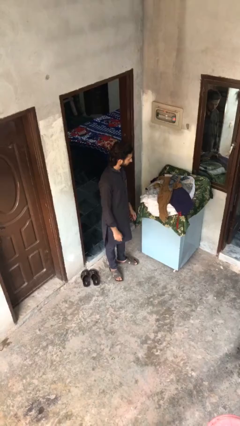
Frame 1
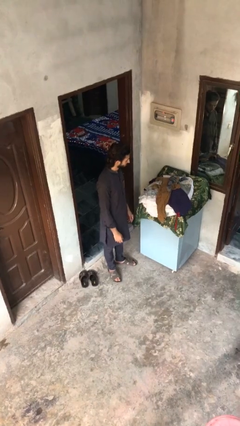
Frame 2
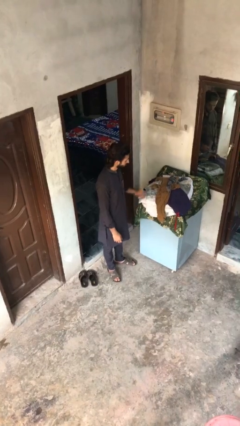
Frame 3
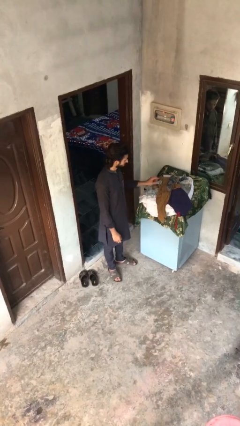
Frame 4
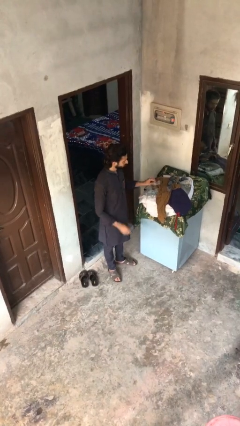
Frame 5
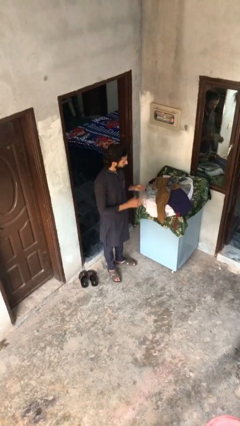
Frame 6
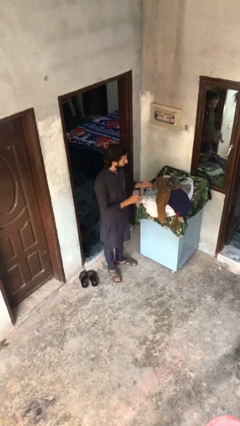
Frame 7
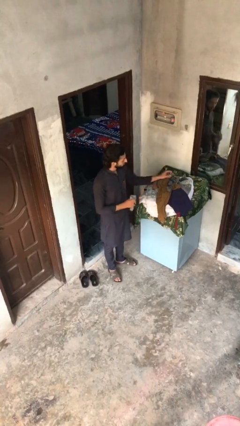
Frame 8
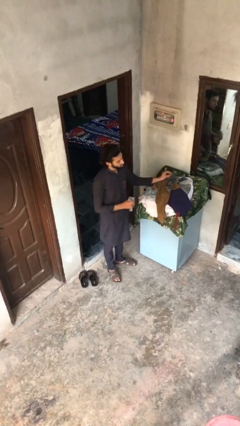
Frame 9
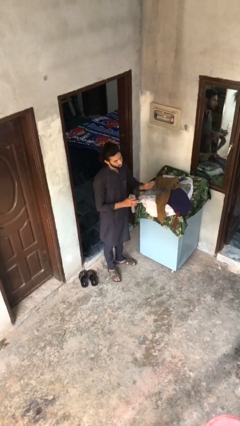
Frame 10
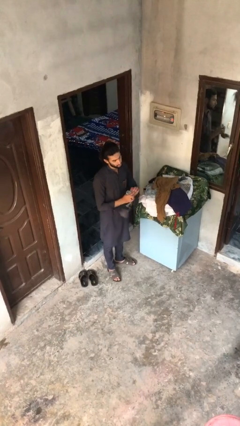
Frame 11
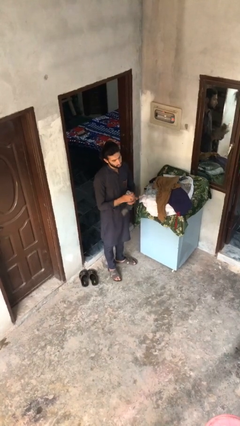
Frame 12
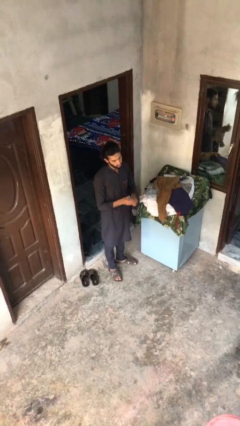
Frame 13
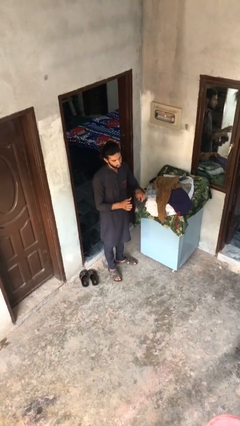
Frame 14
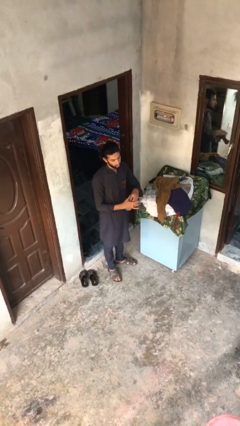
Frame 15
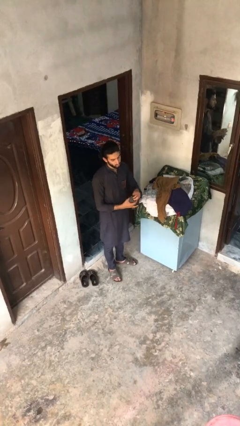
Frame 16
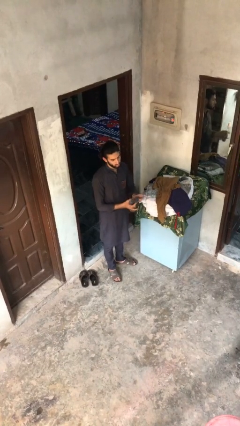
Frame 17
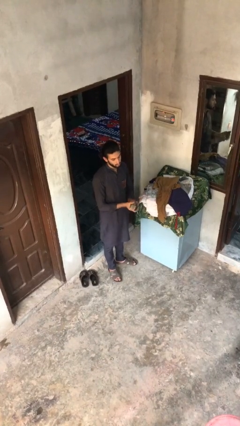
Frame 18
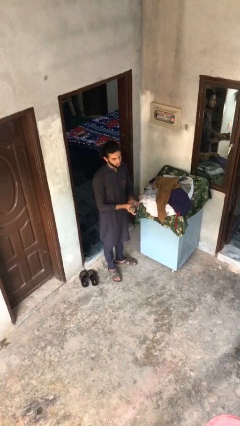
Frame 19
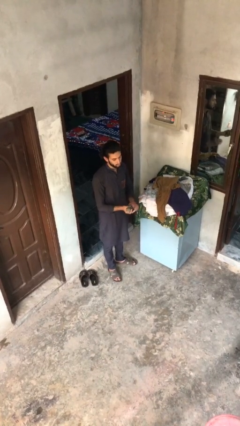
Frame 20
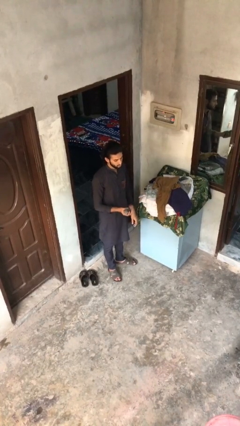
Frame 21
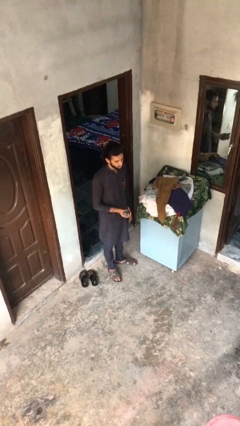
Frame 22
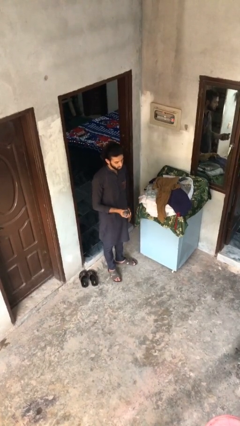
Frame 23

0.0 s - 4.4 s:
person folds socks

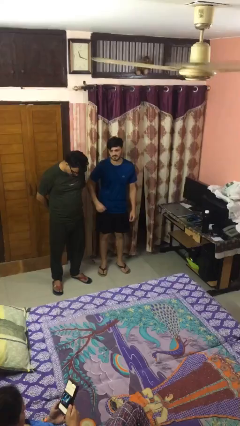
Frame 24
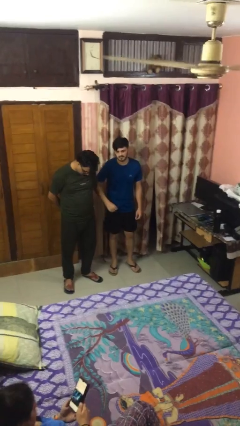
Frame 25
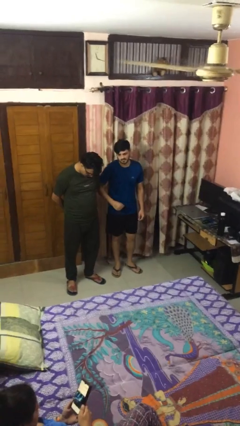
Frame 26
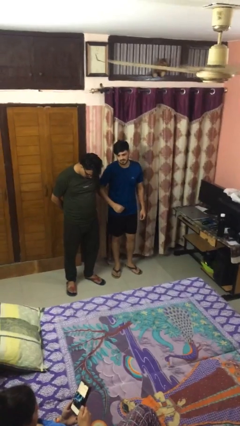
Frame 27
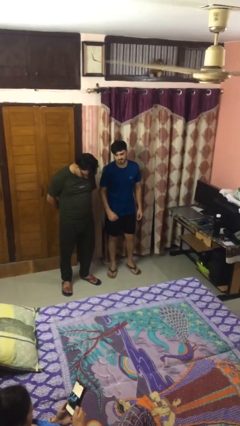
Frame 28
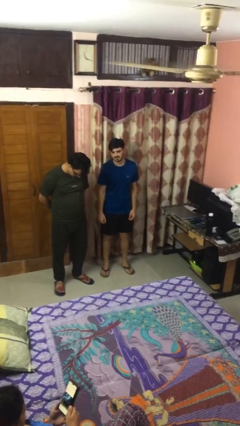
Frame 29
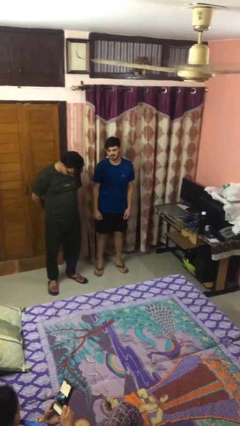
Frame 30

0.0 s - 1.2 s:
person nudges person with elbow

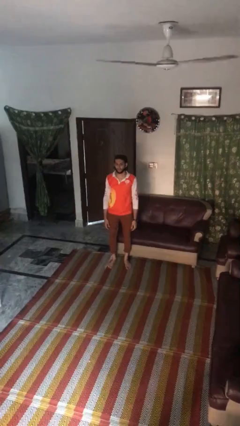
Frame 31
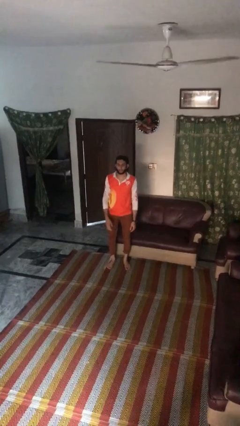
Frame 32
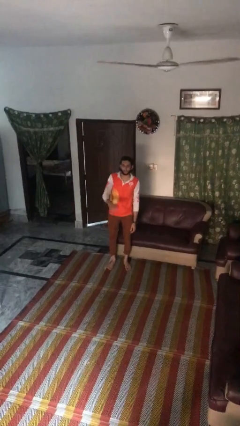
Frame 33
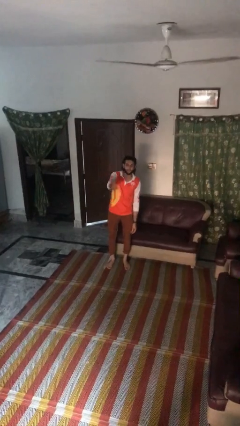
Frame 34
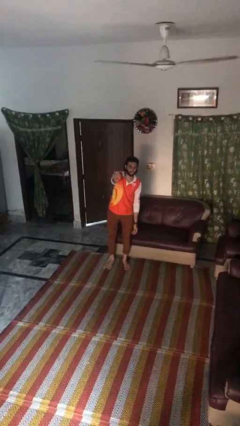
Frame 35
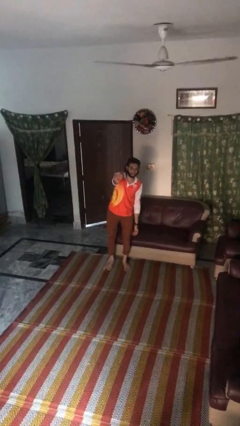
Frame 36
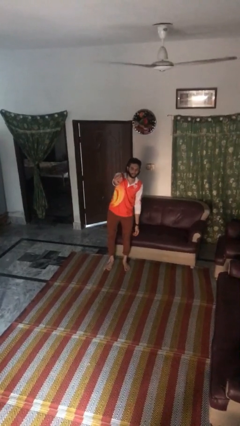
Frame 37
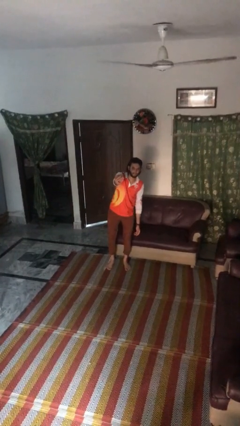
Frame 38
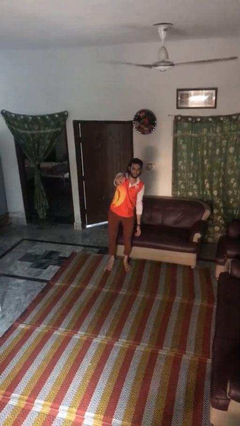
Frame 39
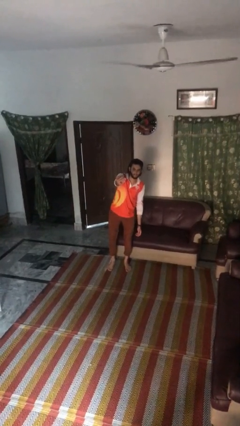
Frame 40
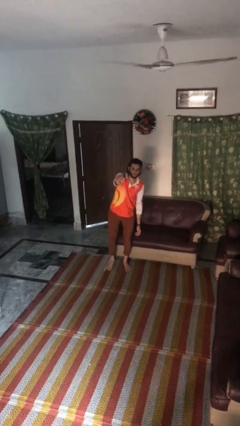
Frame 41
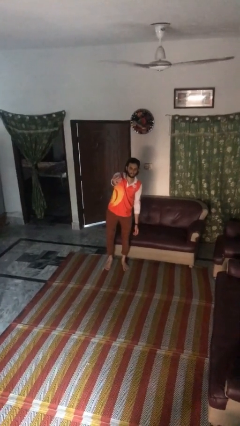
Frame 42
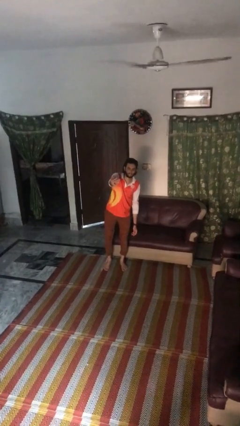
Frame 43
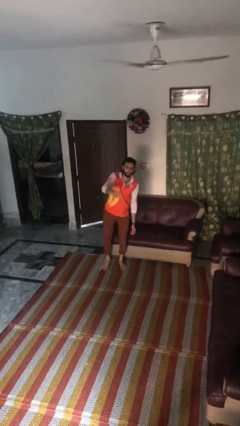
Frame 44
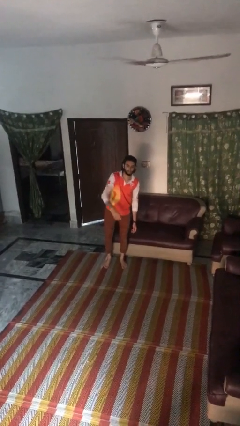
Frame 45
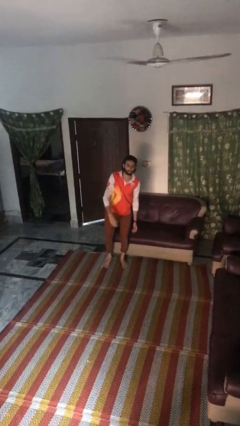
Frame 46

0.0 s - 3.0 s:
person gestures come here

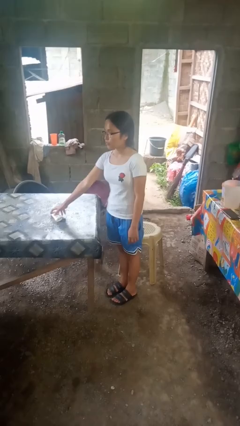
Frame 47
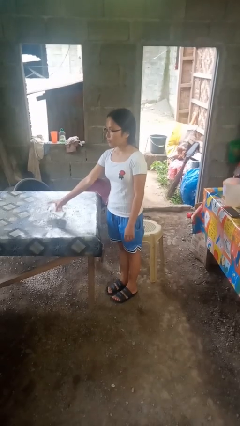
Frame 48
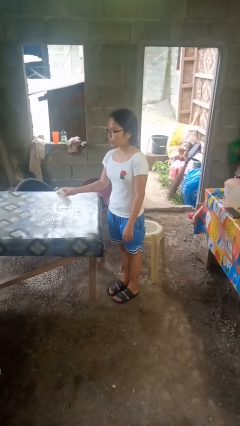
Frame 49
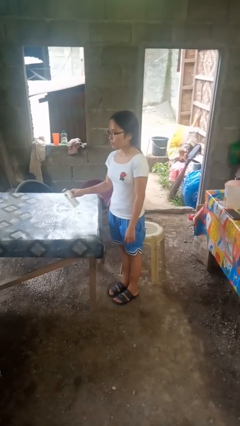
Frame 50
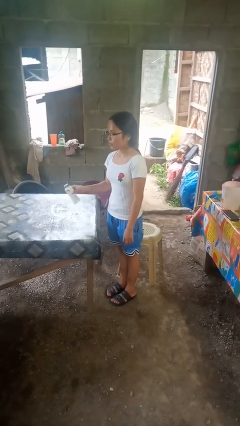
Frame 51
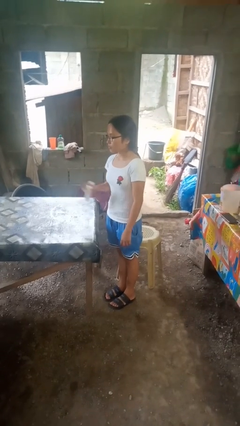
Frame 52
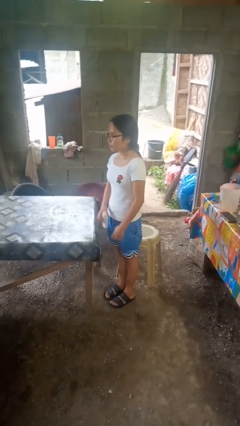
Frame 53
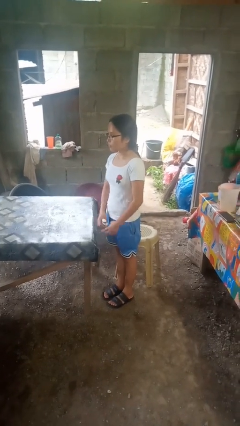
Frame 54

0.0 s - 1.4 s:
person picks up object from table

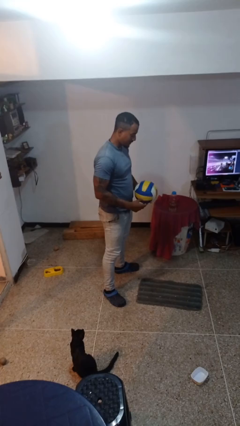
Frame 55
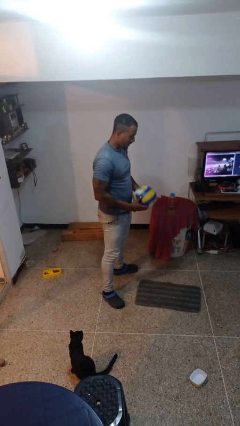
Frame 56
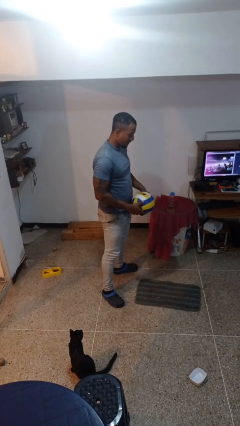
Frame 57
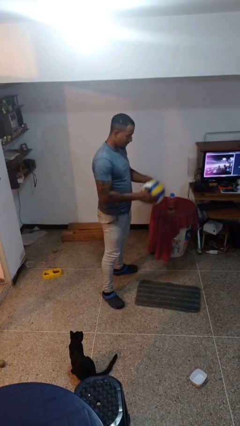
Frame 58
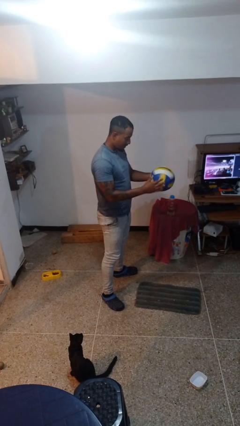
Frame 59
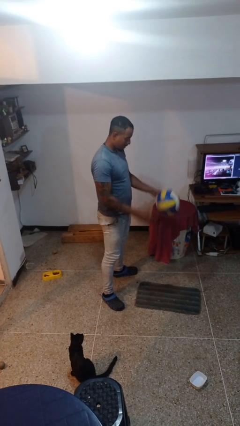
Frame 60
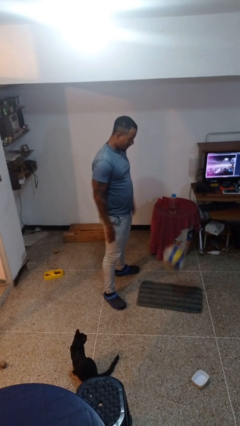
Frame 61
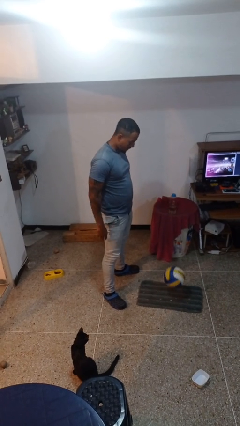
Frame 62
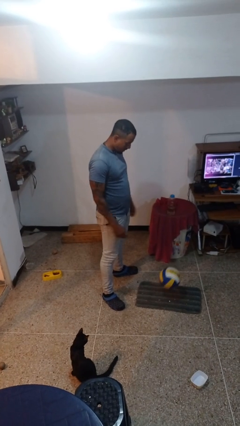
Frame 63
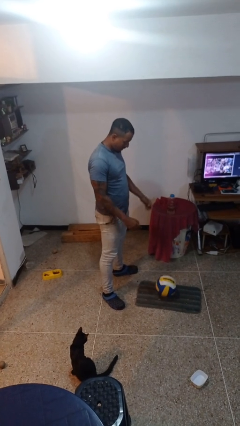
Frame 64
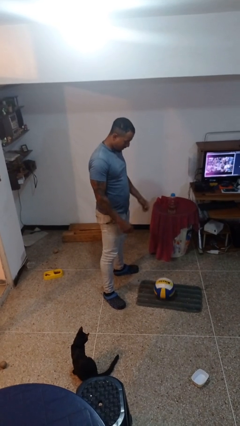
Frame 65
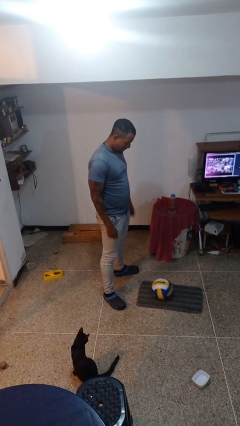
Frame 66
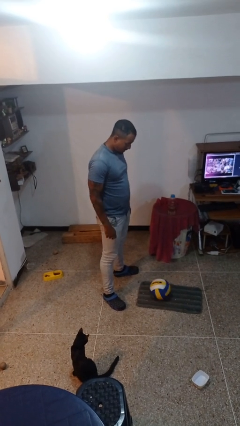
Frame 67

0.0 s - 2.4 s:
person throws object into air

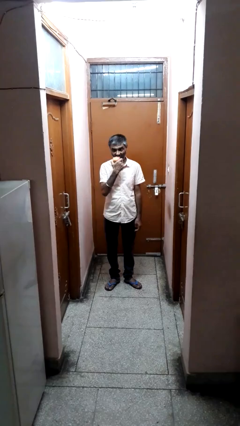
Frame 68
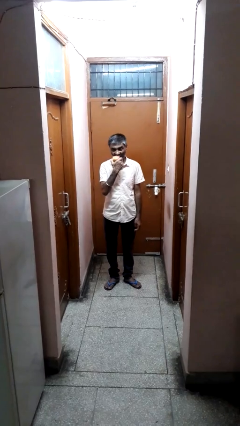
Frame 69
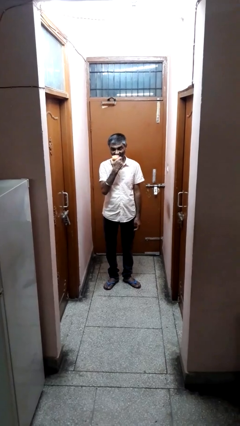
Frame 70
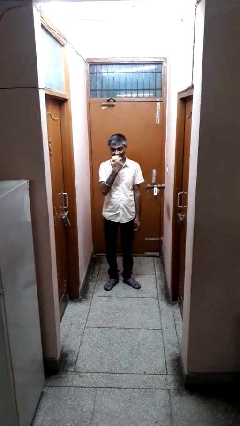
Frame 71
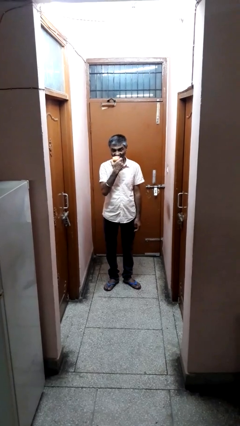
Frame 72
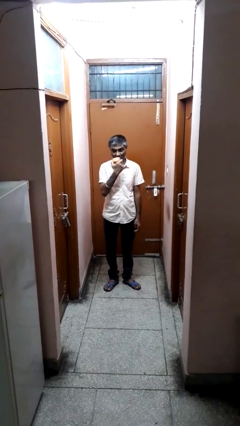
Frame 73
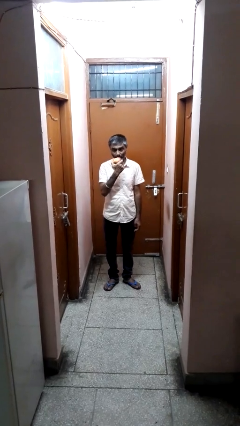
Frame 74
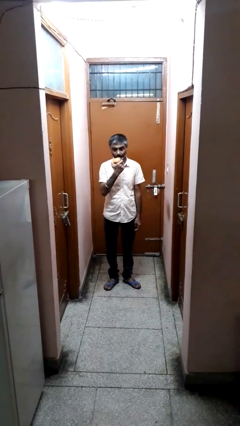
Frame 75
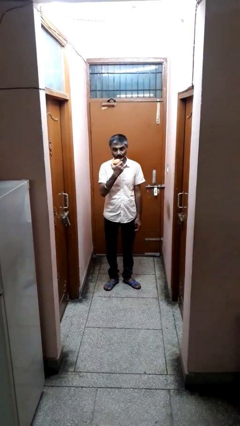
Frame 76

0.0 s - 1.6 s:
person eats apple

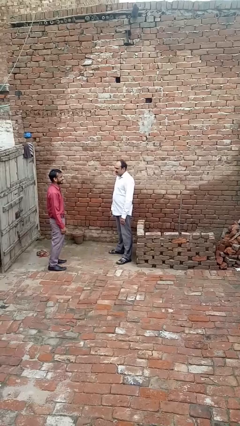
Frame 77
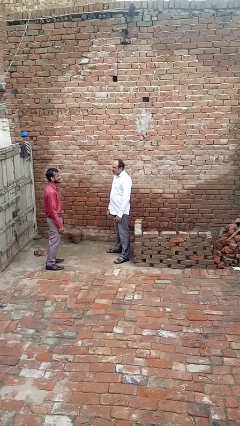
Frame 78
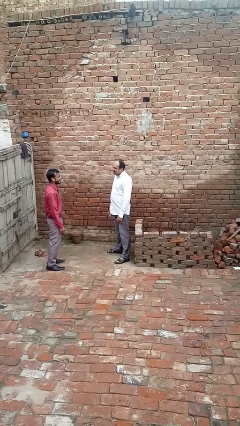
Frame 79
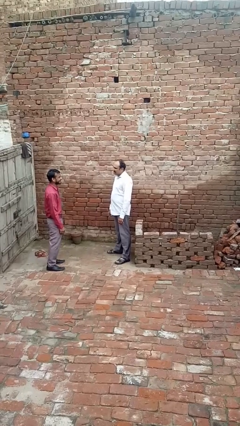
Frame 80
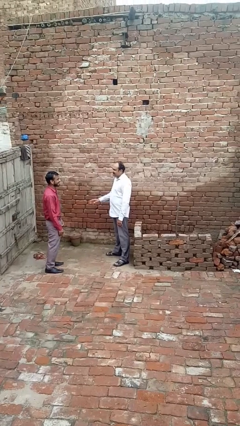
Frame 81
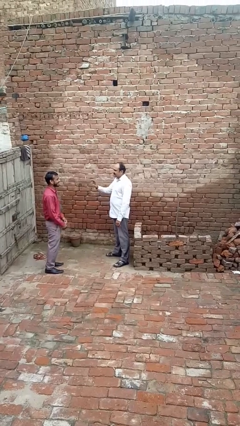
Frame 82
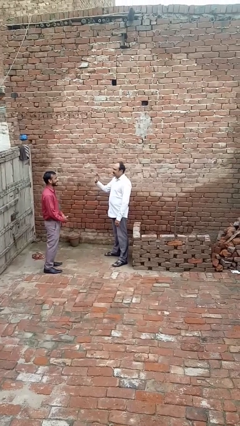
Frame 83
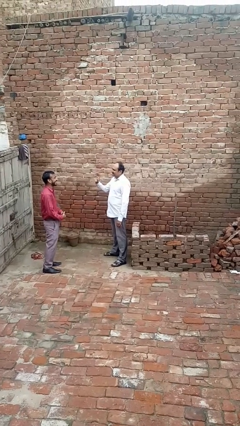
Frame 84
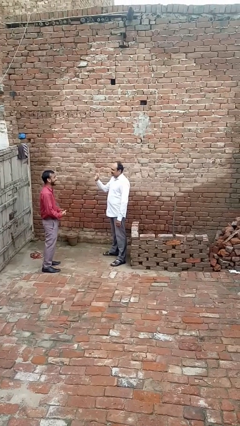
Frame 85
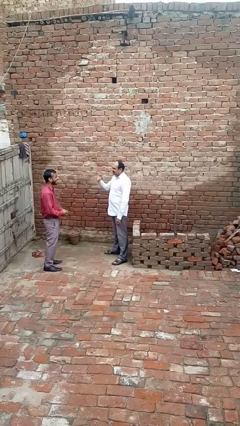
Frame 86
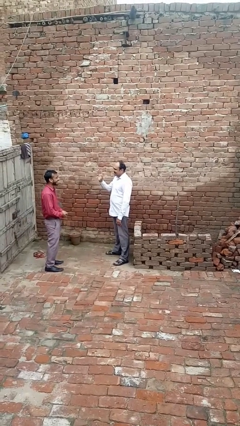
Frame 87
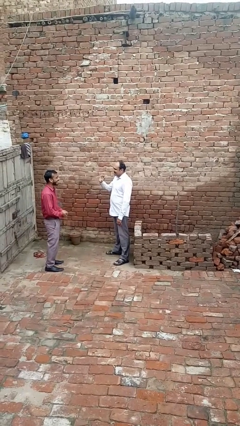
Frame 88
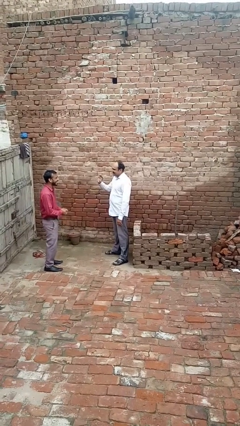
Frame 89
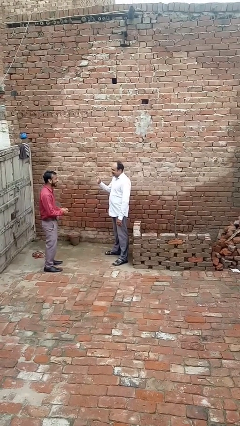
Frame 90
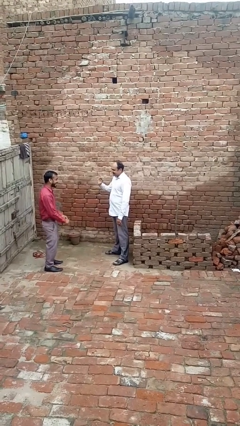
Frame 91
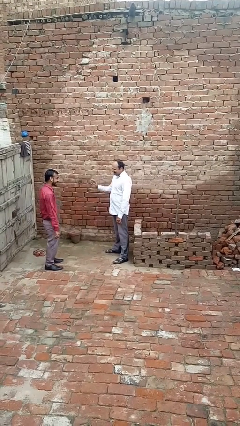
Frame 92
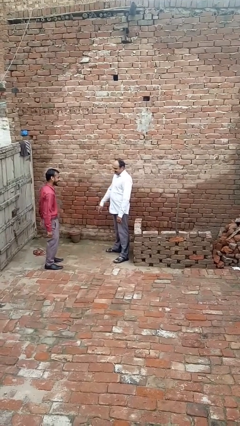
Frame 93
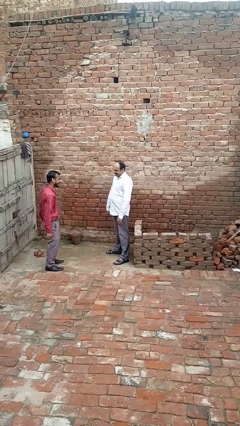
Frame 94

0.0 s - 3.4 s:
person waves at person
